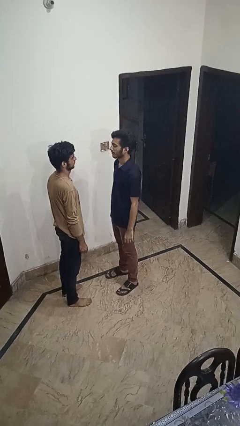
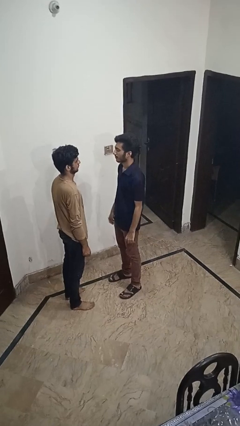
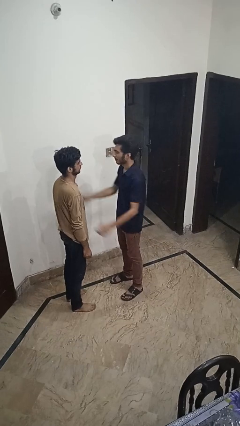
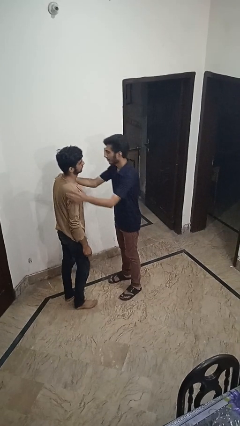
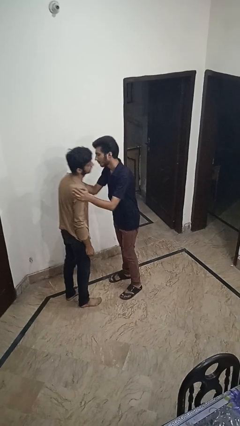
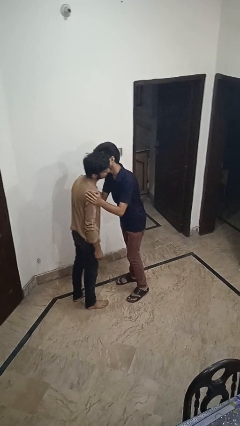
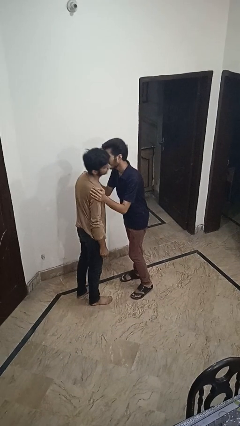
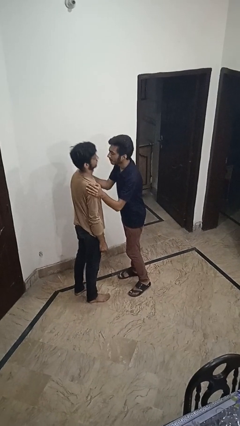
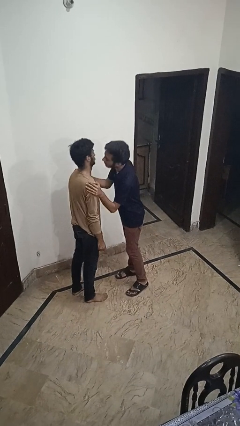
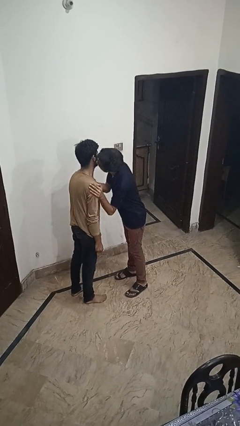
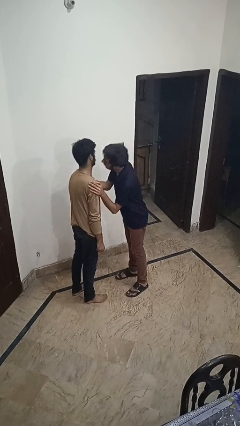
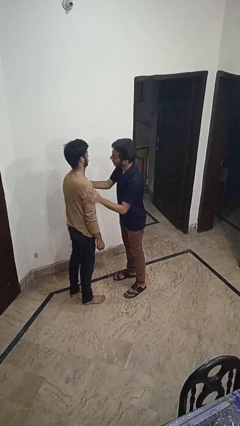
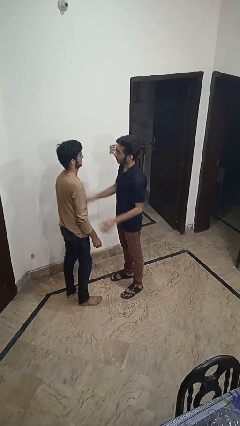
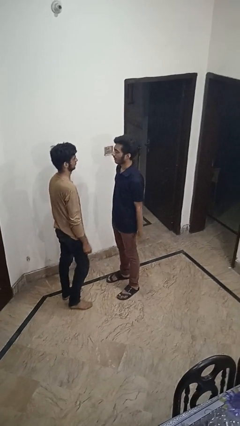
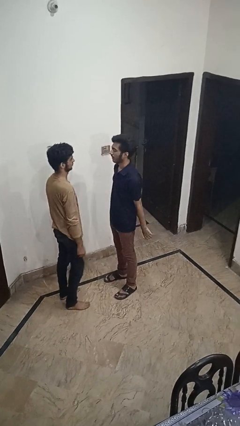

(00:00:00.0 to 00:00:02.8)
person kisses cheek of person

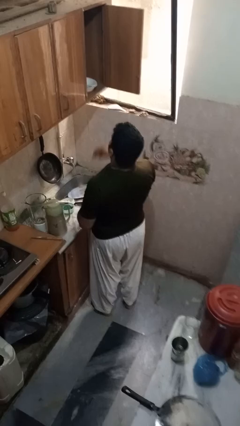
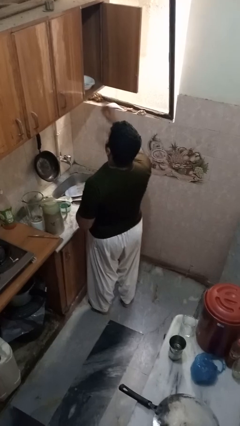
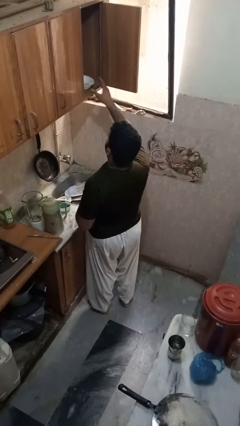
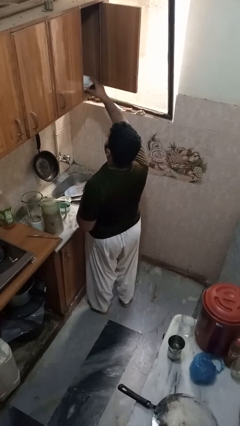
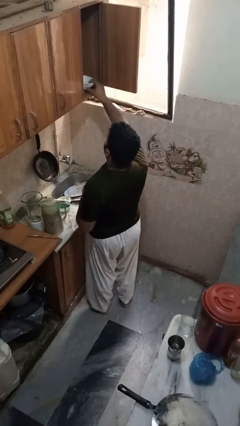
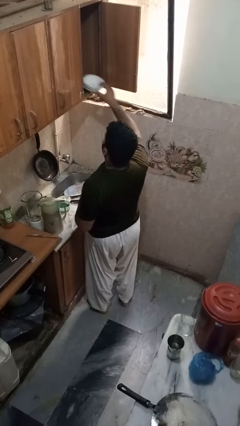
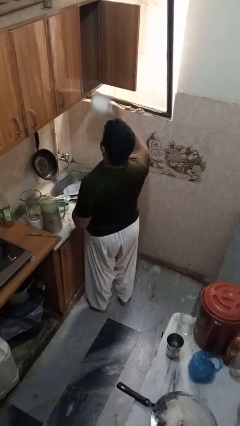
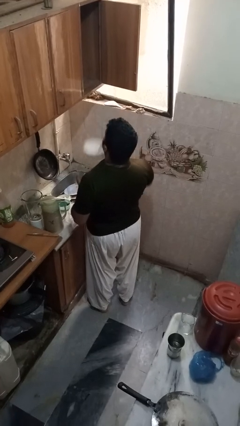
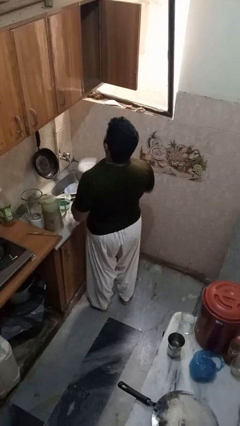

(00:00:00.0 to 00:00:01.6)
person takes object from cabinet

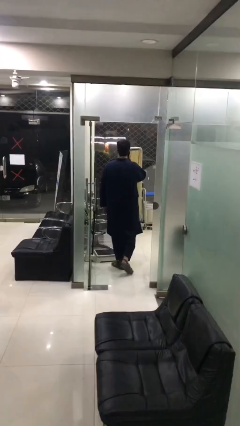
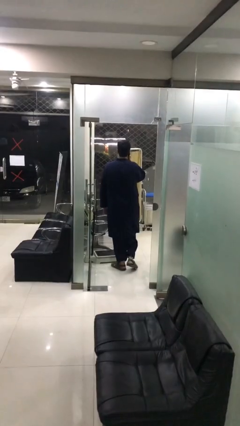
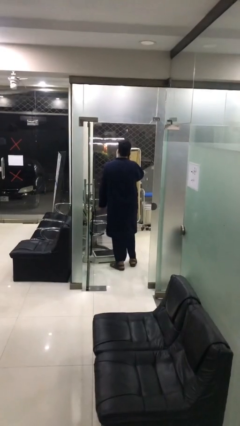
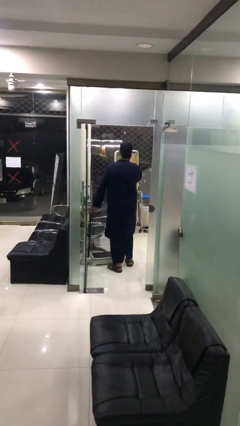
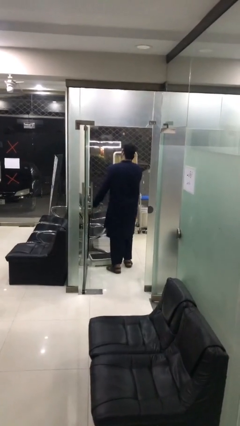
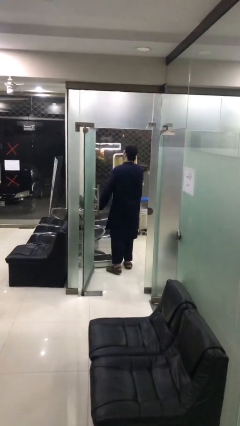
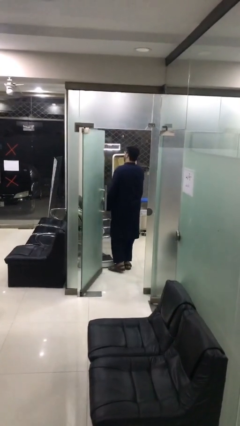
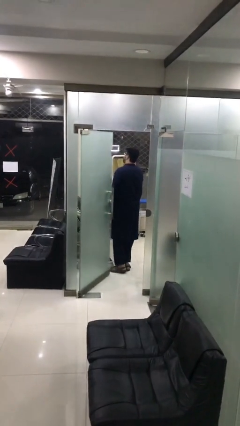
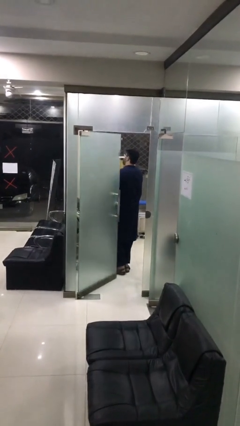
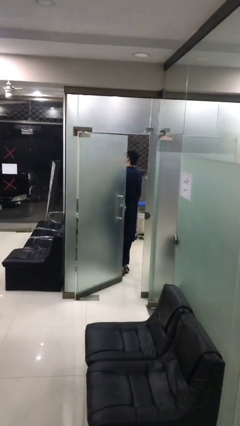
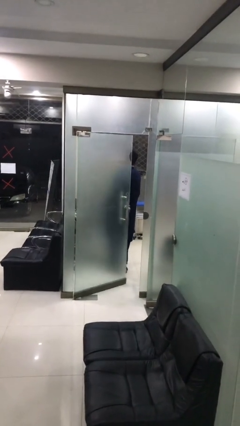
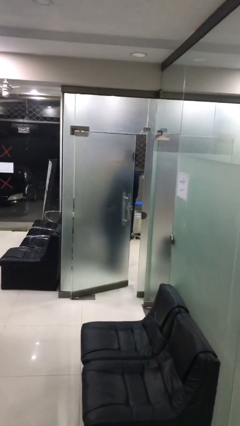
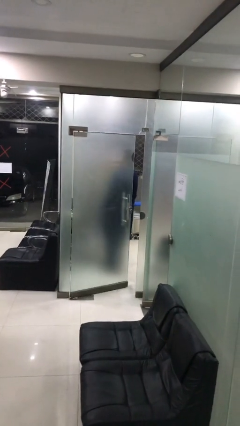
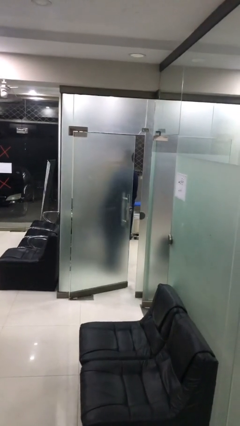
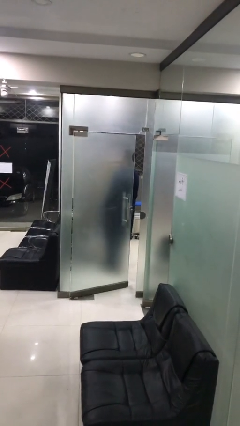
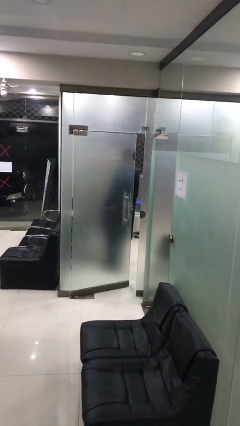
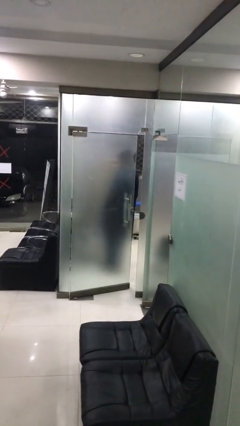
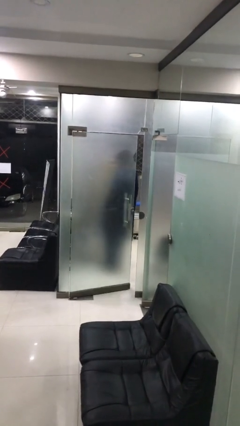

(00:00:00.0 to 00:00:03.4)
person closes facility door

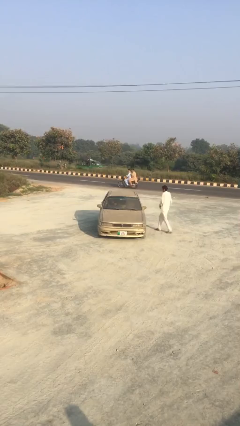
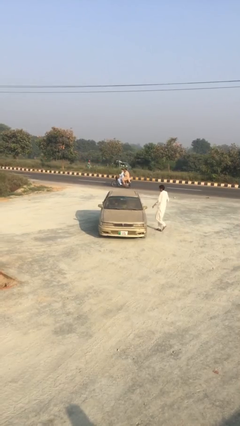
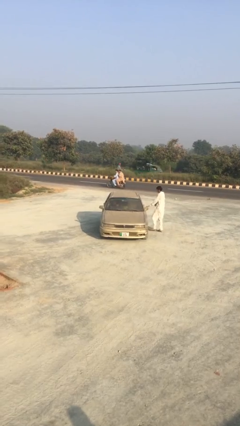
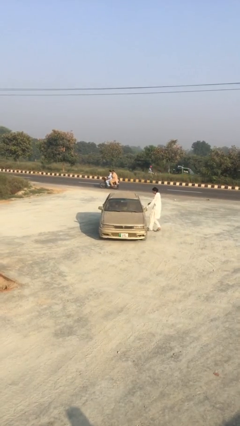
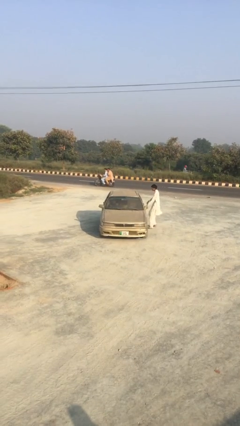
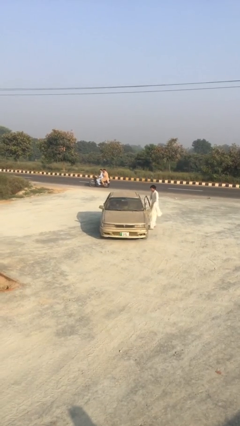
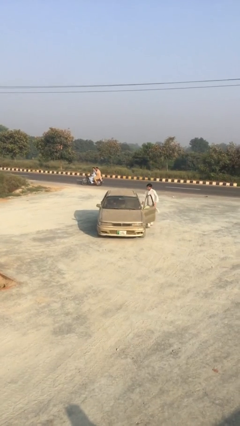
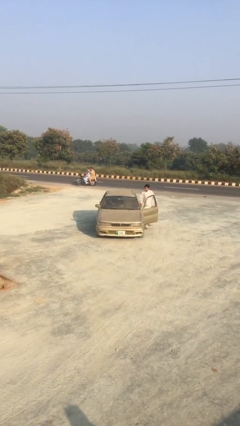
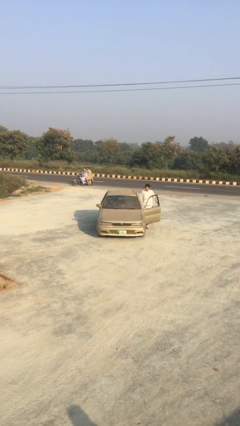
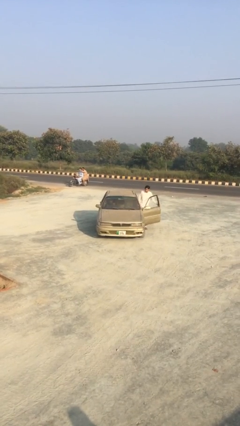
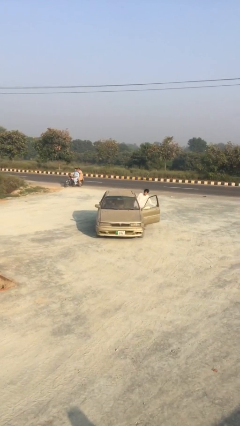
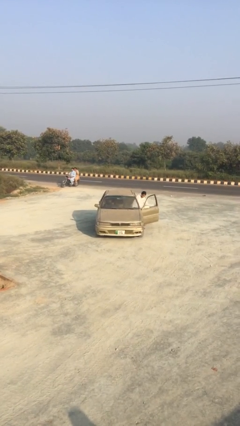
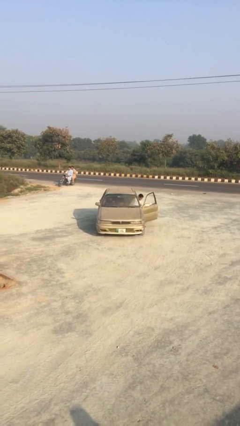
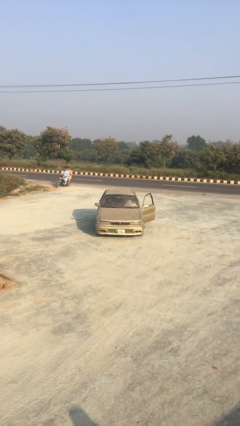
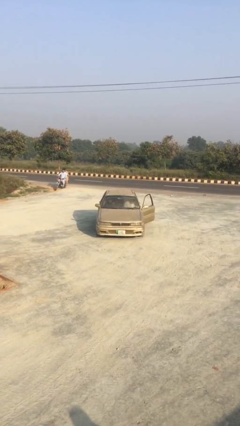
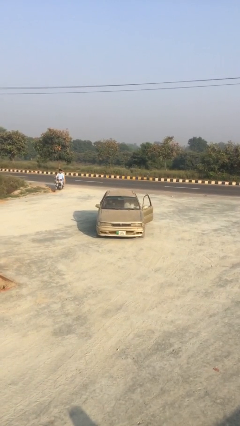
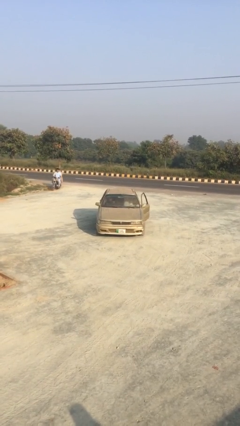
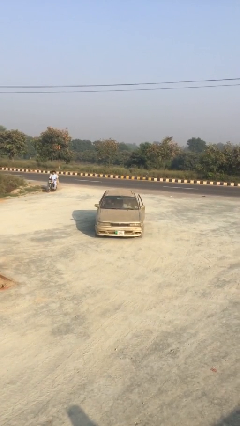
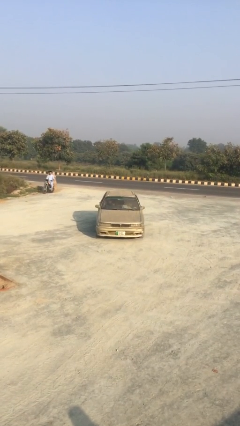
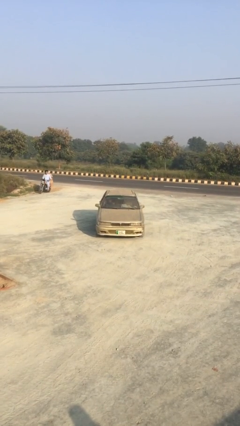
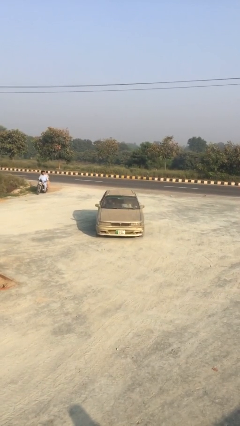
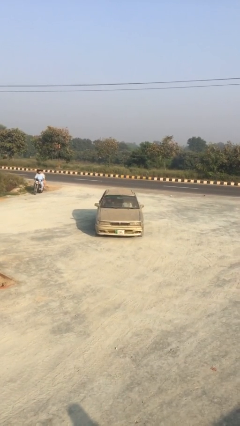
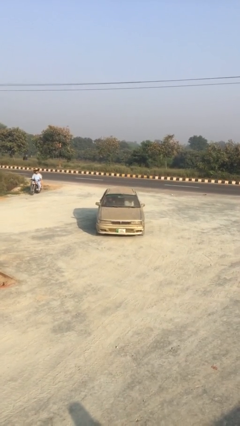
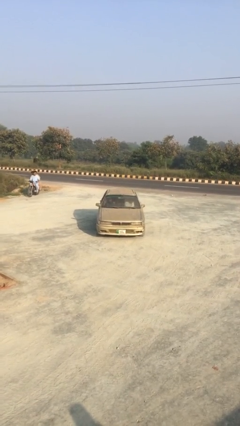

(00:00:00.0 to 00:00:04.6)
car picks up person

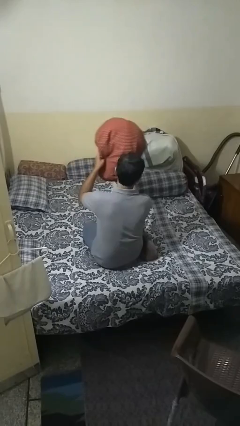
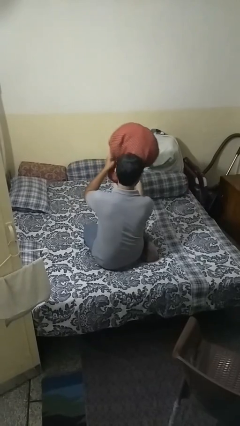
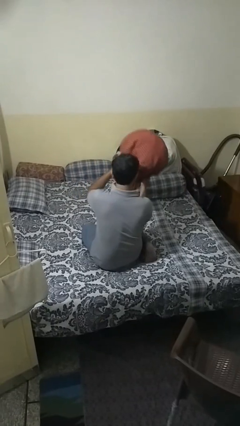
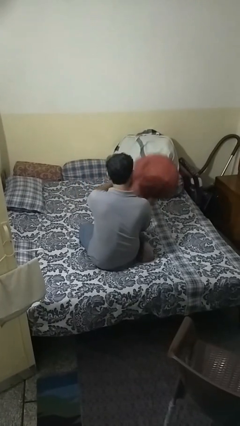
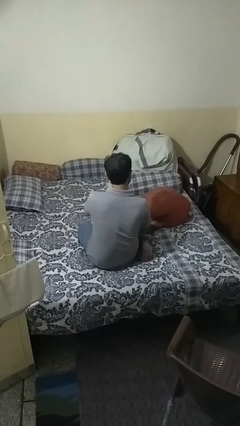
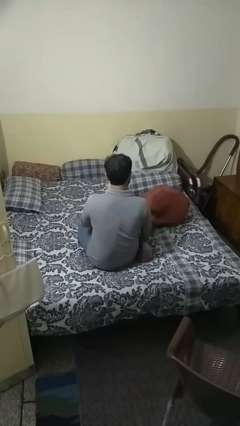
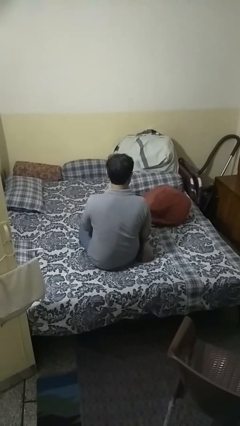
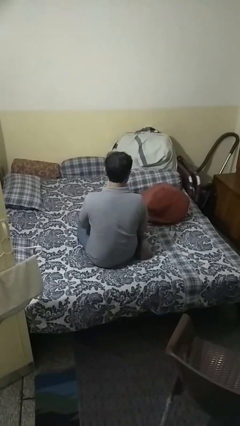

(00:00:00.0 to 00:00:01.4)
person puts down object on bed

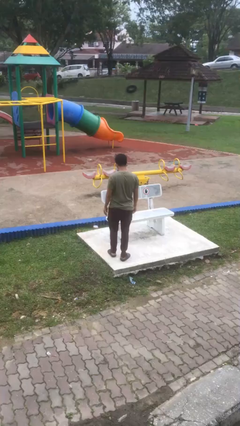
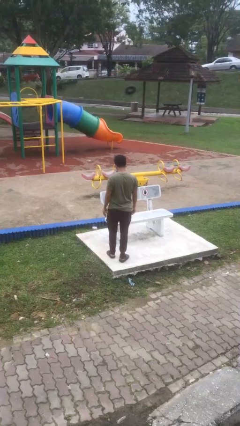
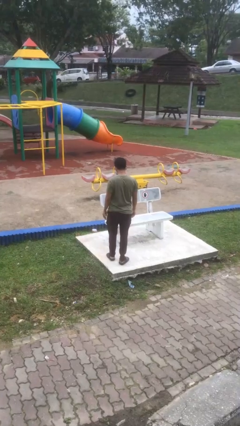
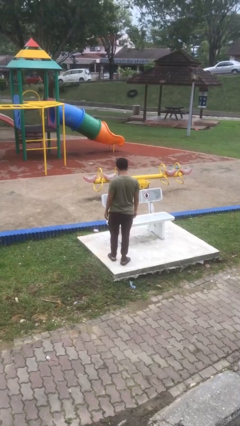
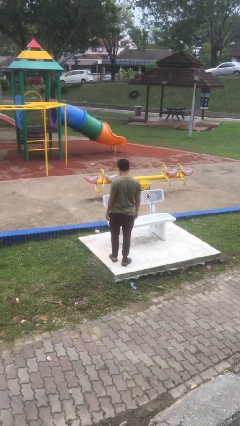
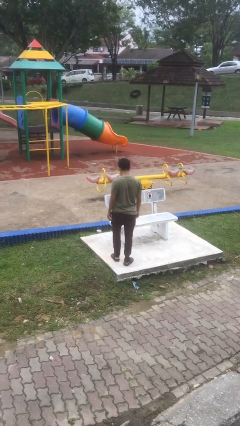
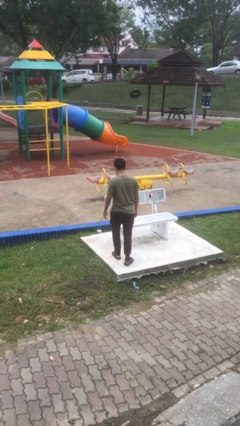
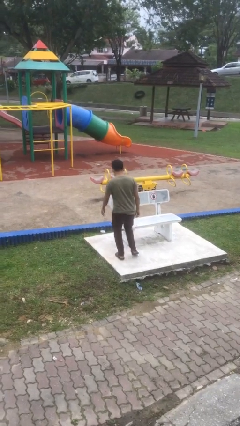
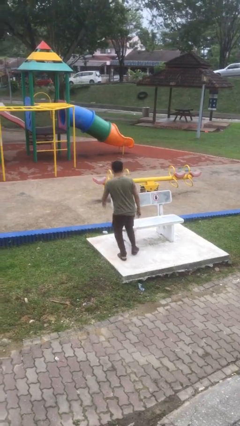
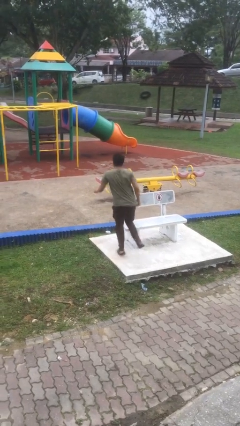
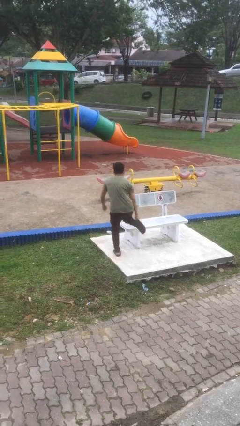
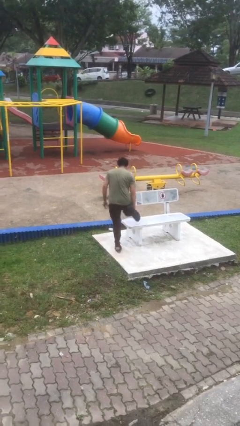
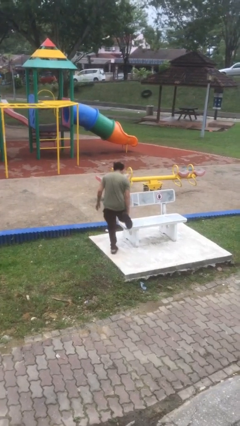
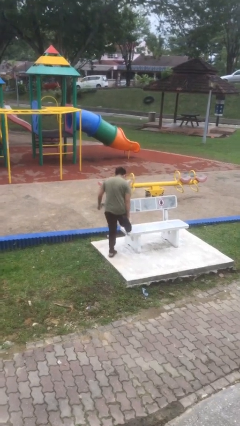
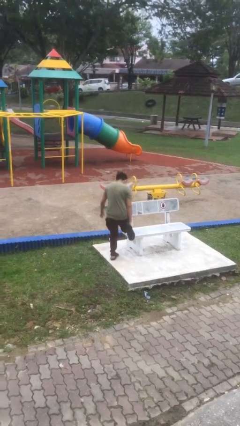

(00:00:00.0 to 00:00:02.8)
person stubs toe

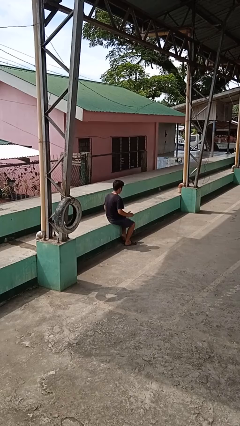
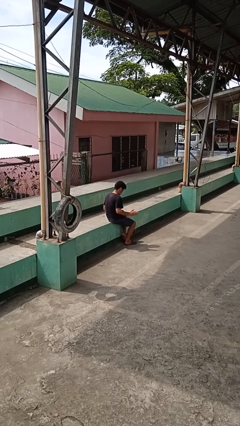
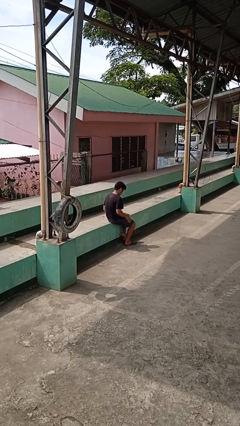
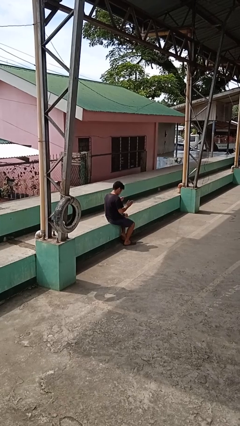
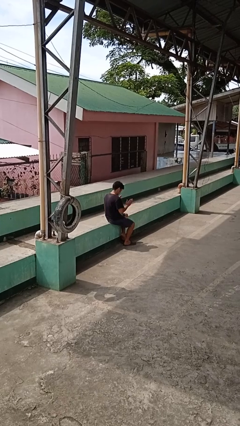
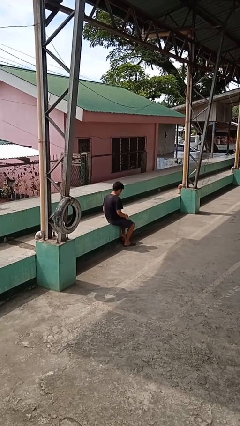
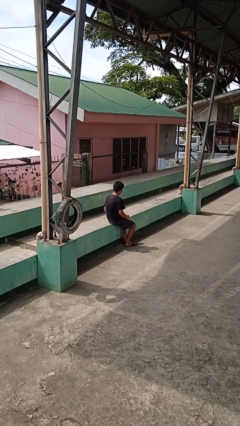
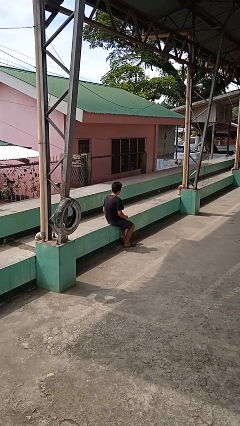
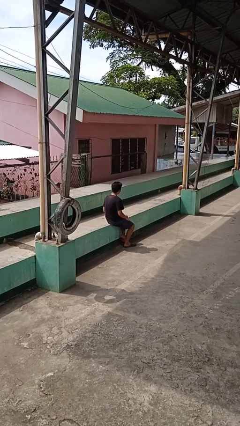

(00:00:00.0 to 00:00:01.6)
person slaps hands on thighs
